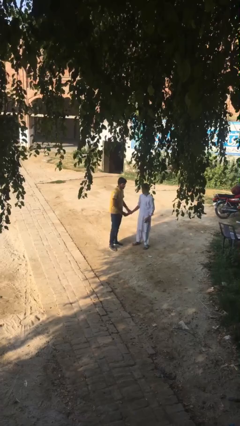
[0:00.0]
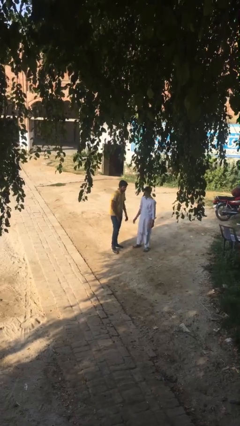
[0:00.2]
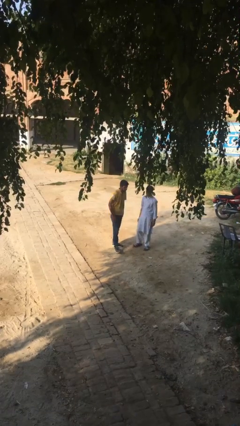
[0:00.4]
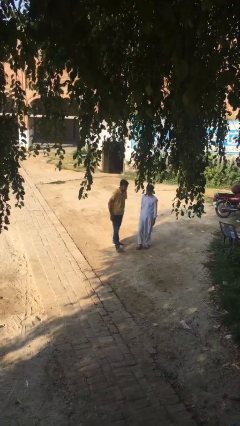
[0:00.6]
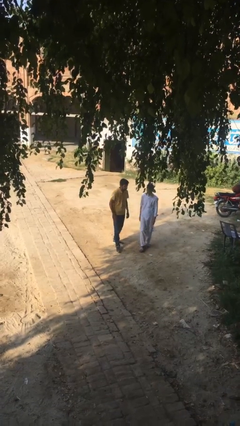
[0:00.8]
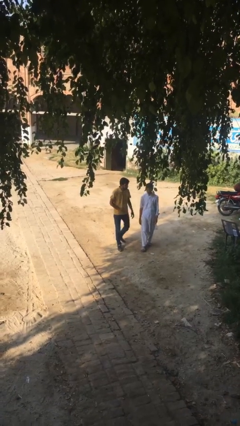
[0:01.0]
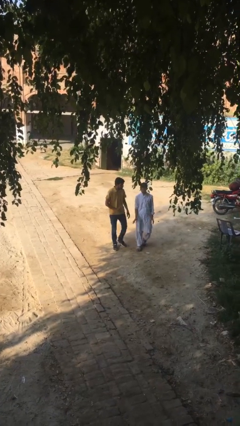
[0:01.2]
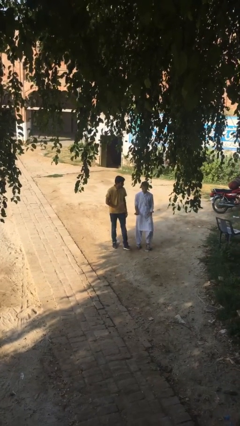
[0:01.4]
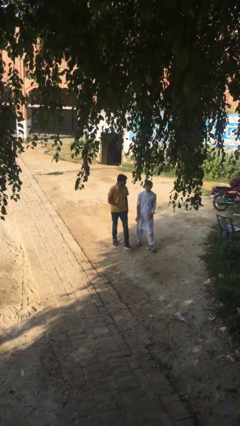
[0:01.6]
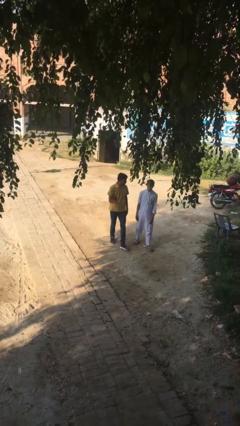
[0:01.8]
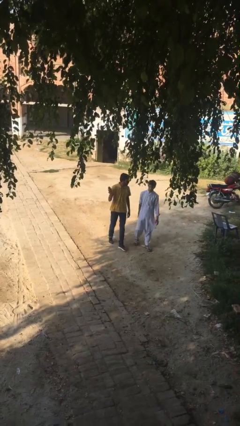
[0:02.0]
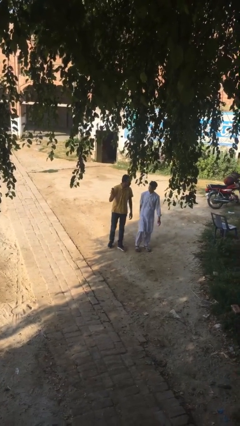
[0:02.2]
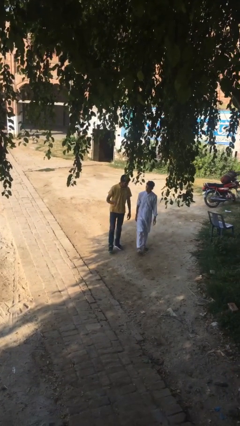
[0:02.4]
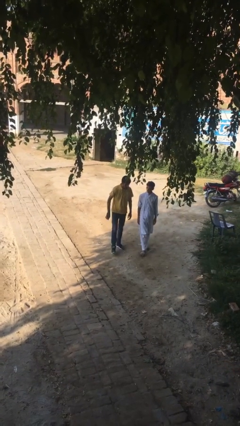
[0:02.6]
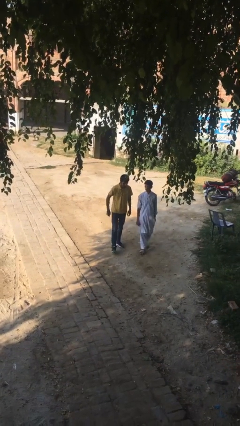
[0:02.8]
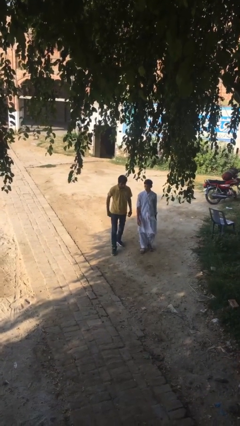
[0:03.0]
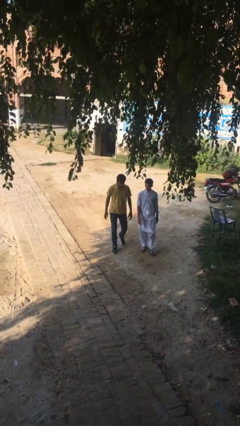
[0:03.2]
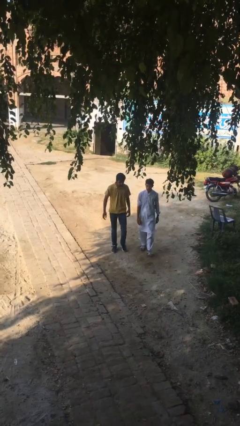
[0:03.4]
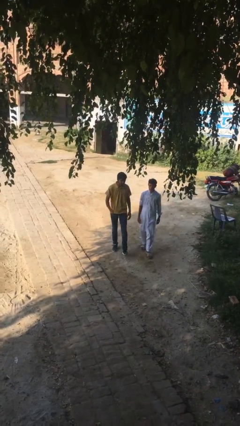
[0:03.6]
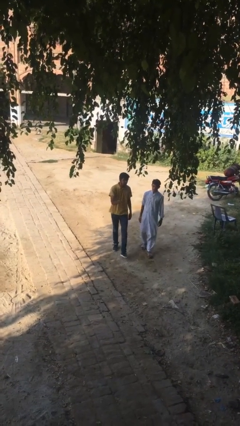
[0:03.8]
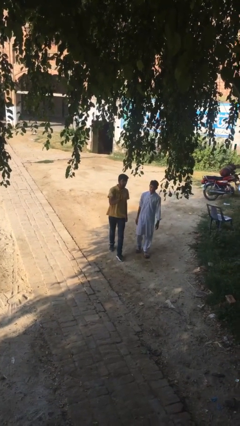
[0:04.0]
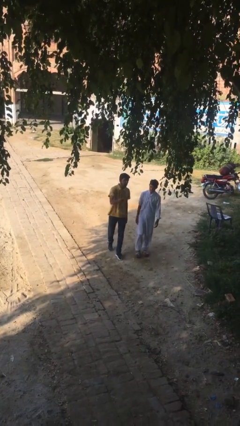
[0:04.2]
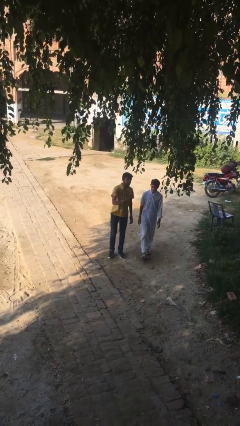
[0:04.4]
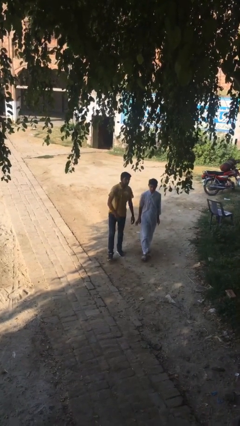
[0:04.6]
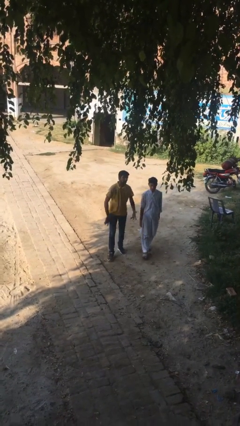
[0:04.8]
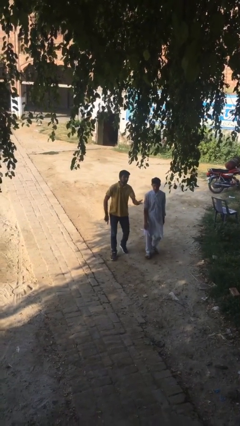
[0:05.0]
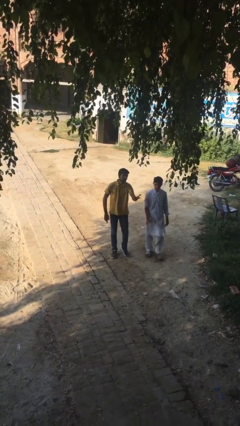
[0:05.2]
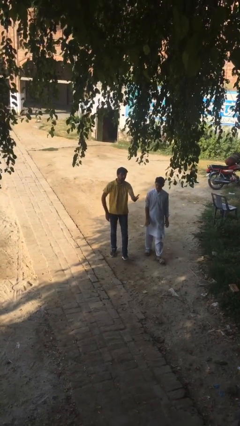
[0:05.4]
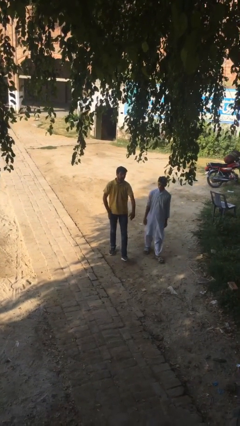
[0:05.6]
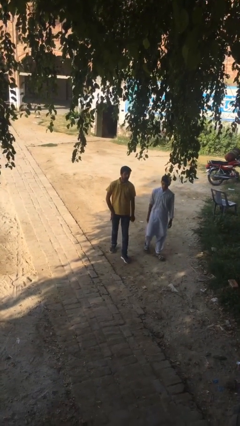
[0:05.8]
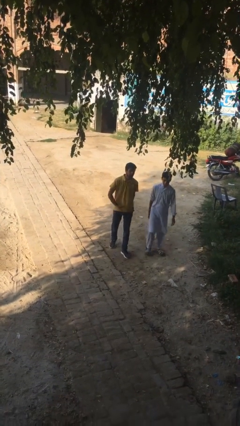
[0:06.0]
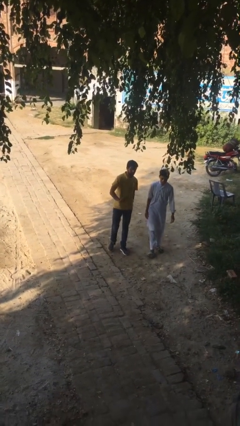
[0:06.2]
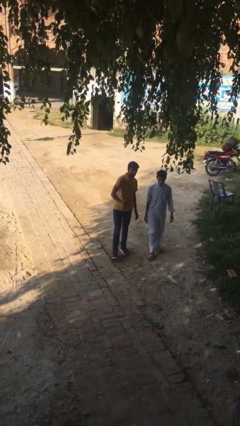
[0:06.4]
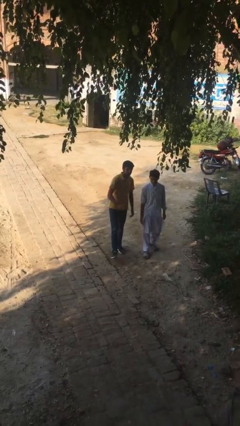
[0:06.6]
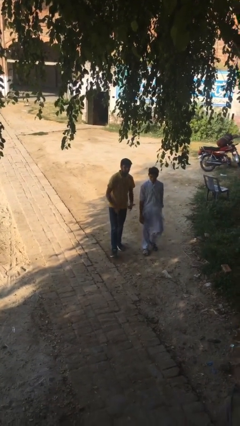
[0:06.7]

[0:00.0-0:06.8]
person talks to person

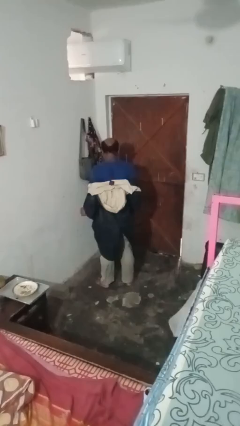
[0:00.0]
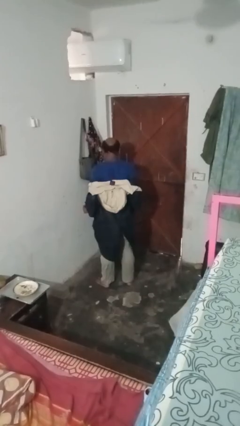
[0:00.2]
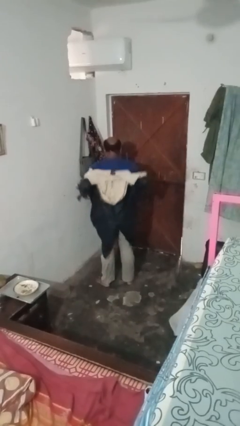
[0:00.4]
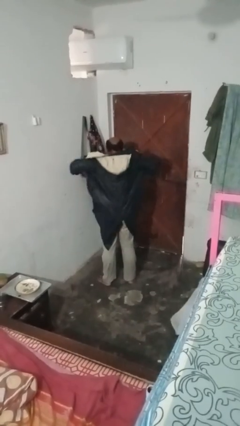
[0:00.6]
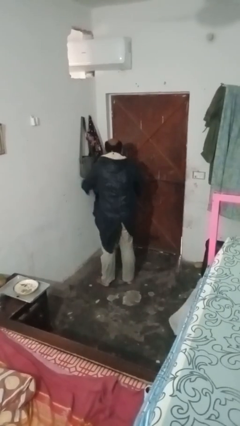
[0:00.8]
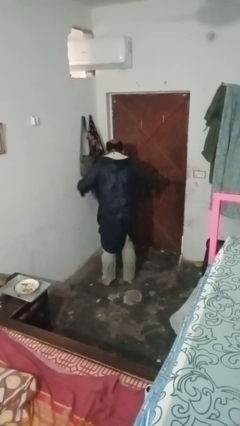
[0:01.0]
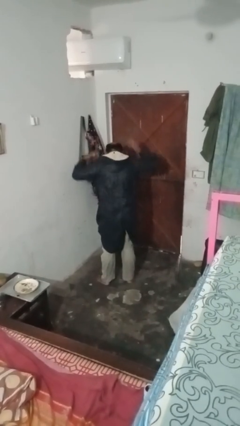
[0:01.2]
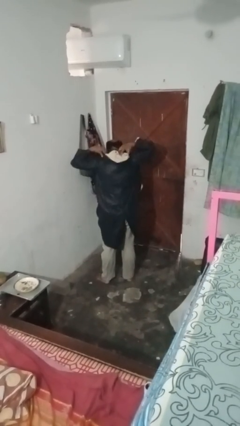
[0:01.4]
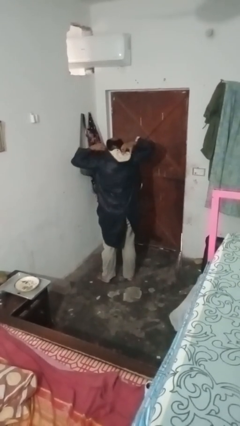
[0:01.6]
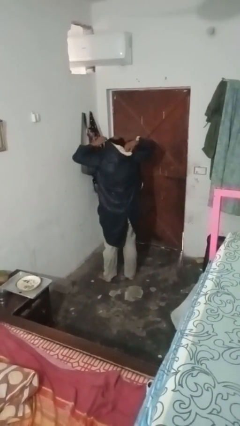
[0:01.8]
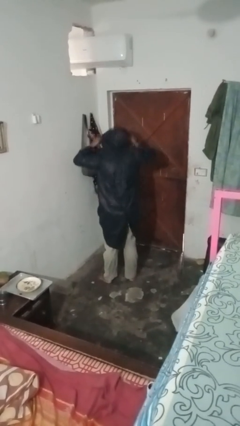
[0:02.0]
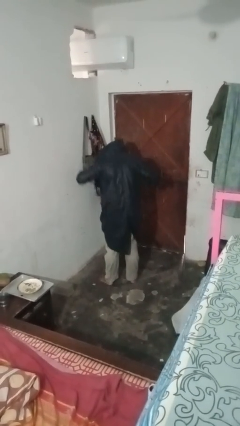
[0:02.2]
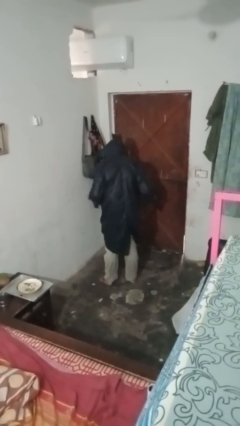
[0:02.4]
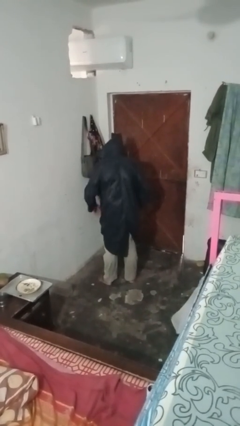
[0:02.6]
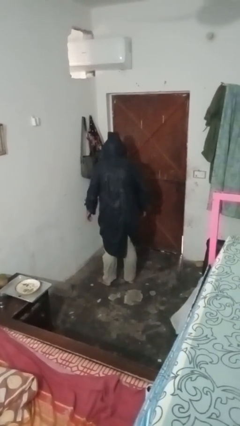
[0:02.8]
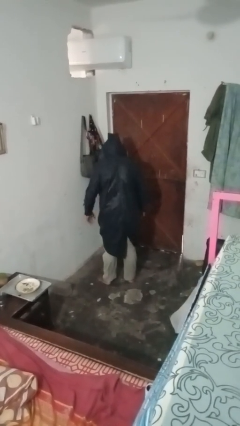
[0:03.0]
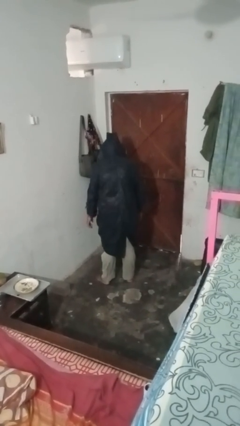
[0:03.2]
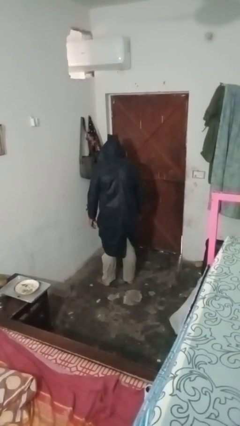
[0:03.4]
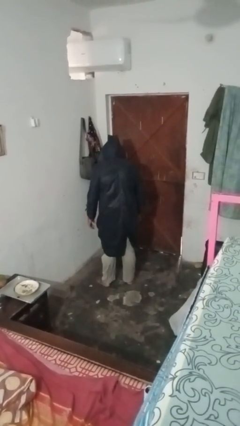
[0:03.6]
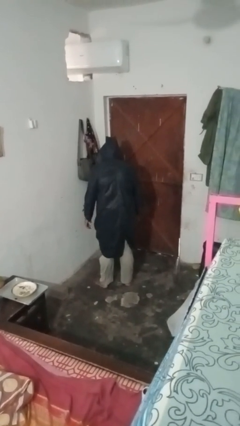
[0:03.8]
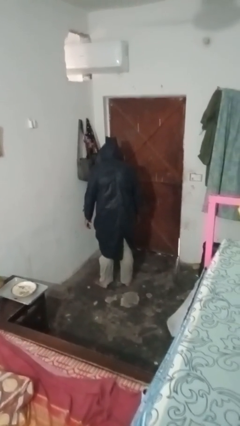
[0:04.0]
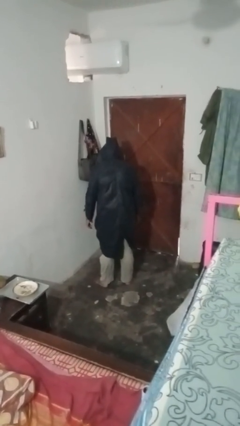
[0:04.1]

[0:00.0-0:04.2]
person puts on hoodie

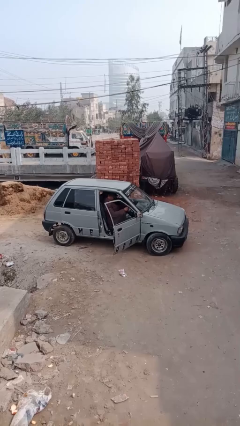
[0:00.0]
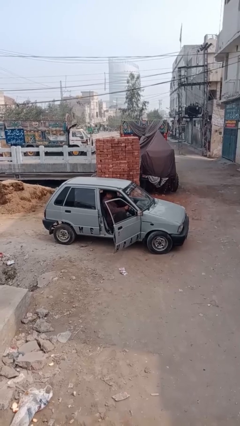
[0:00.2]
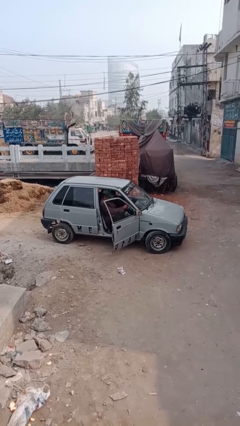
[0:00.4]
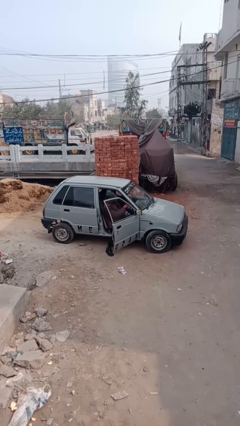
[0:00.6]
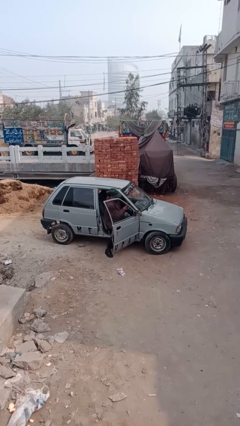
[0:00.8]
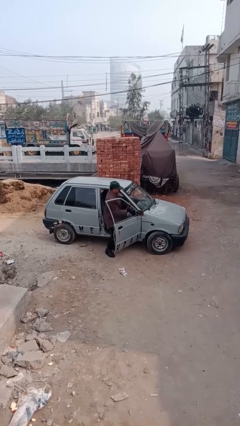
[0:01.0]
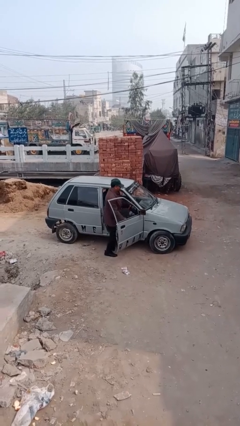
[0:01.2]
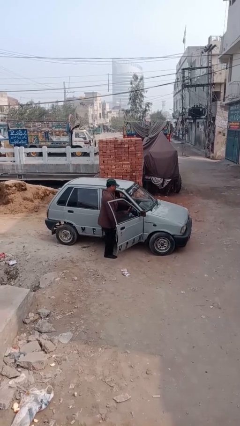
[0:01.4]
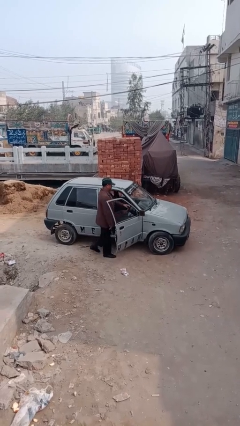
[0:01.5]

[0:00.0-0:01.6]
person exits car

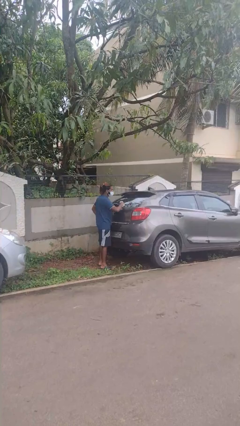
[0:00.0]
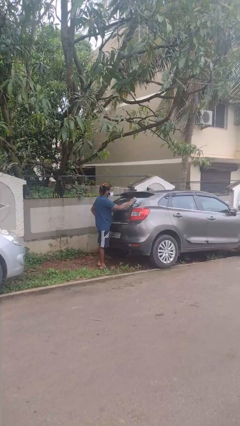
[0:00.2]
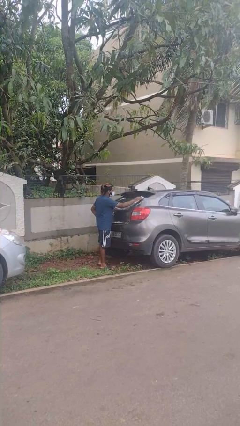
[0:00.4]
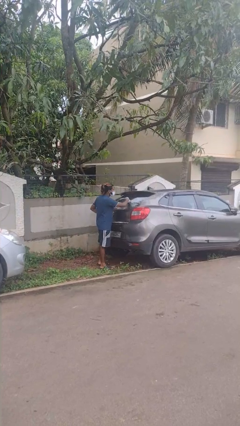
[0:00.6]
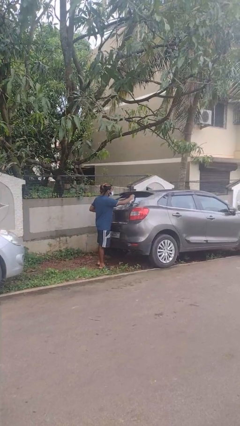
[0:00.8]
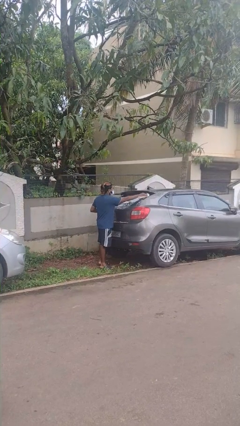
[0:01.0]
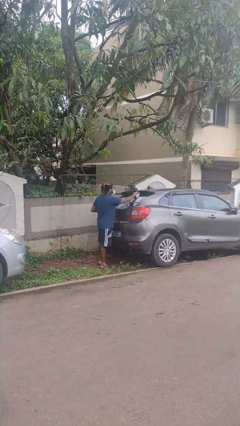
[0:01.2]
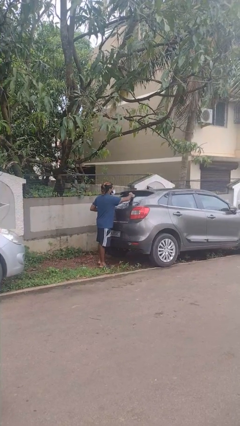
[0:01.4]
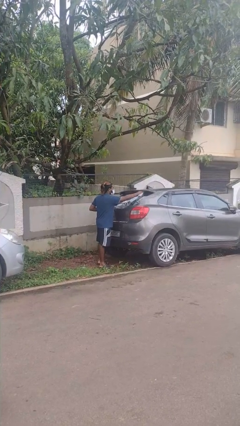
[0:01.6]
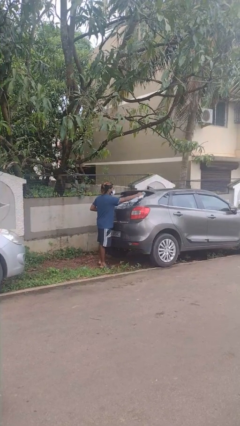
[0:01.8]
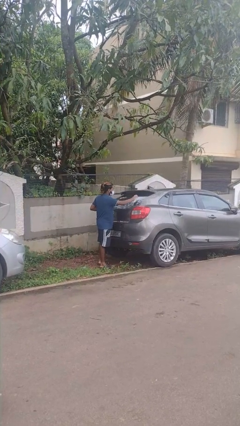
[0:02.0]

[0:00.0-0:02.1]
person polishes car with rag

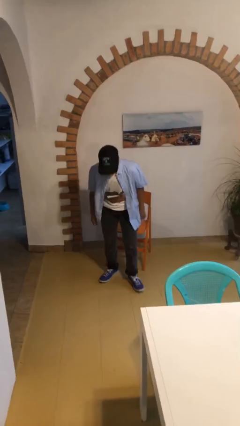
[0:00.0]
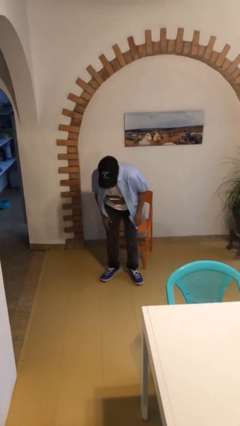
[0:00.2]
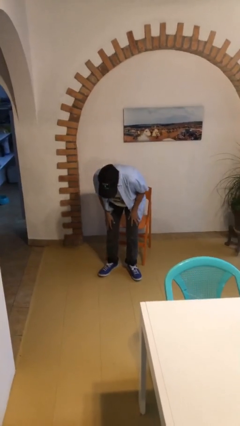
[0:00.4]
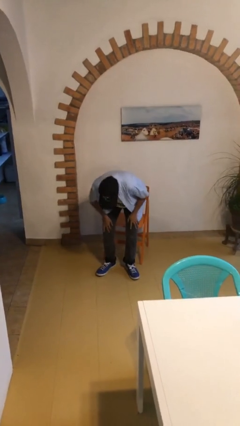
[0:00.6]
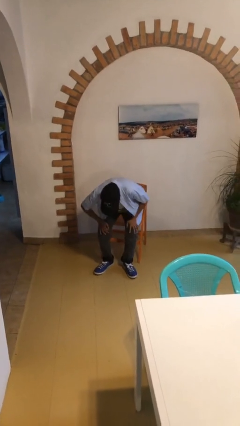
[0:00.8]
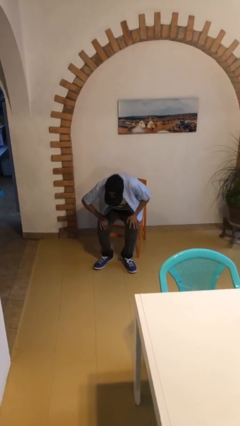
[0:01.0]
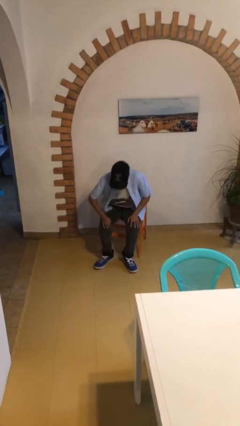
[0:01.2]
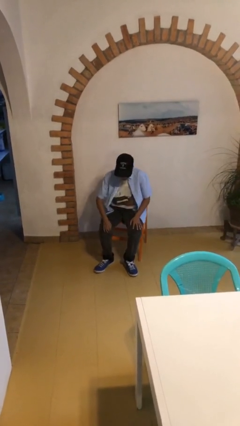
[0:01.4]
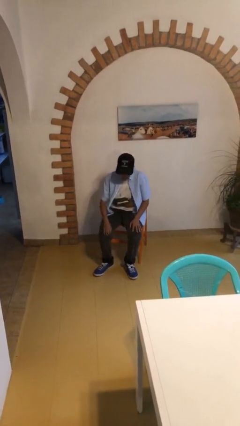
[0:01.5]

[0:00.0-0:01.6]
person sits down

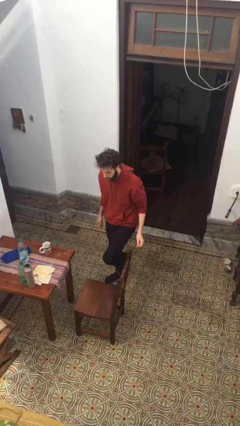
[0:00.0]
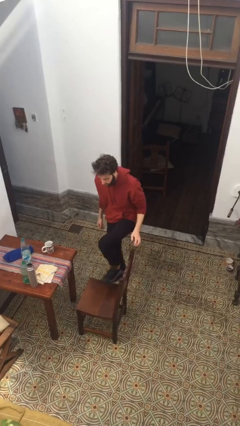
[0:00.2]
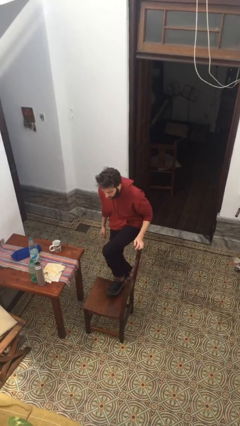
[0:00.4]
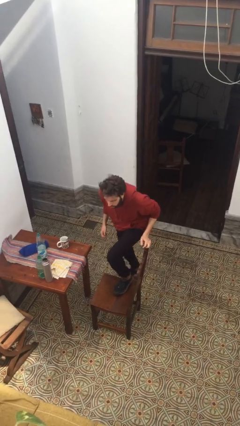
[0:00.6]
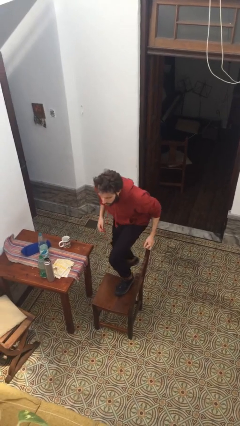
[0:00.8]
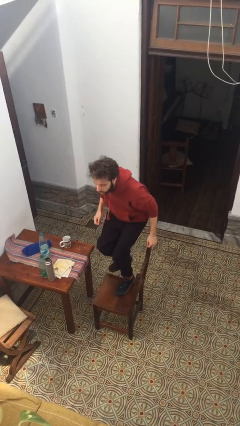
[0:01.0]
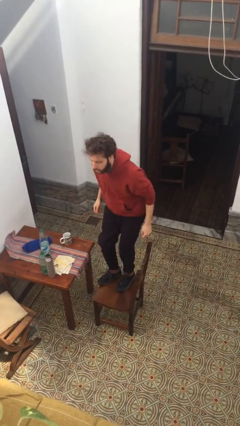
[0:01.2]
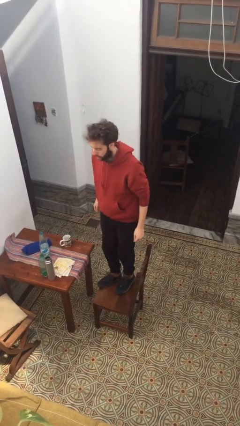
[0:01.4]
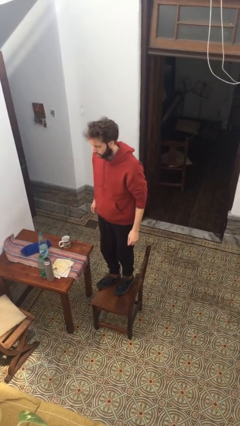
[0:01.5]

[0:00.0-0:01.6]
person climbs on chair
